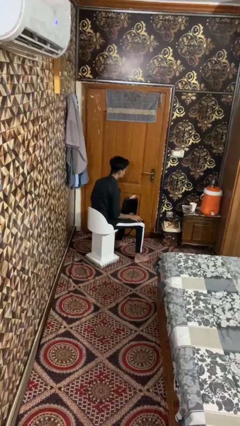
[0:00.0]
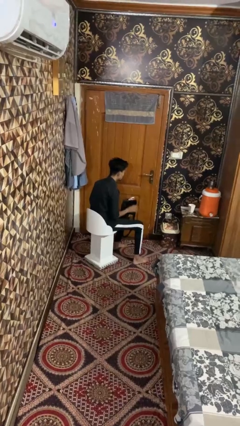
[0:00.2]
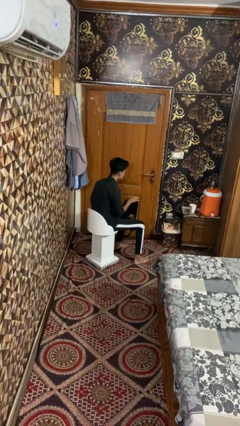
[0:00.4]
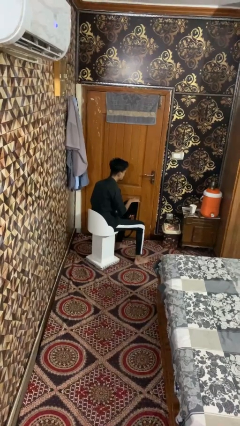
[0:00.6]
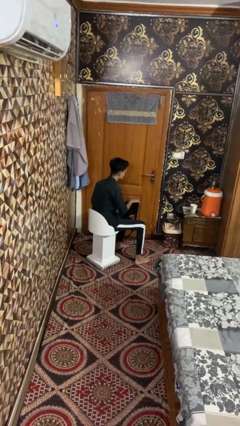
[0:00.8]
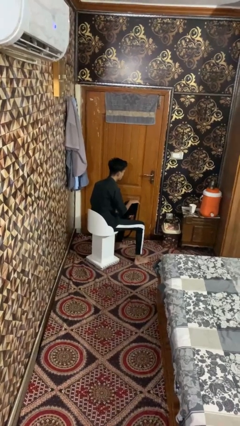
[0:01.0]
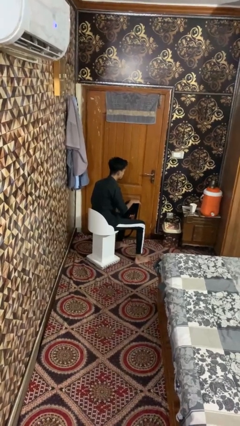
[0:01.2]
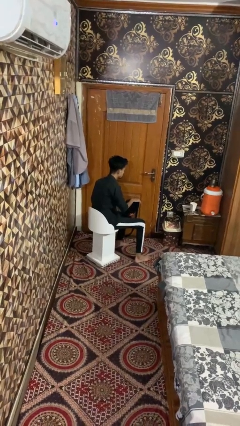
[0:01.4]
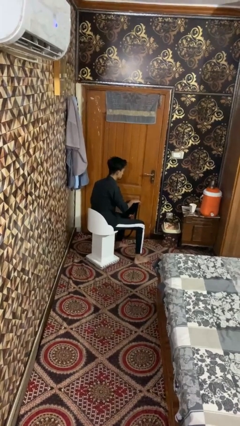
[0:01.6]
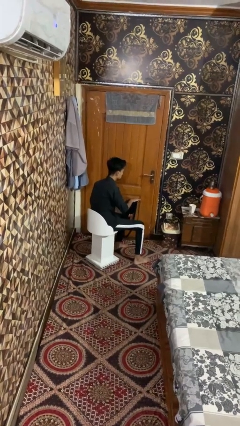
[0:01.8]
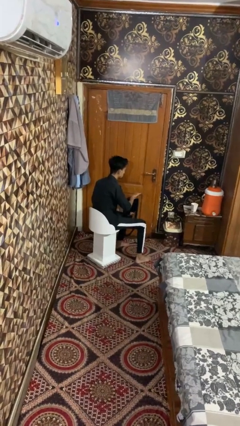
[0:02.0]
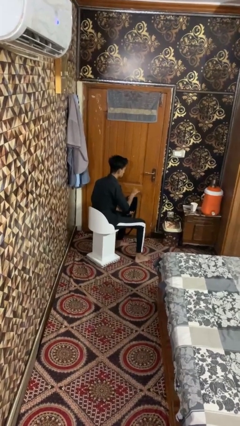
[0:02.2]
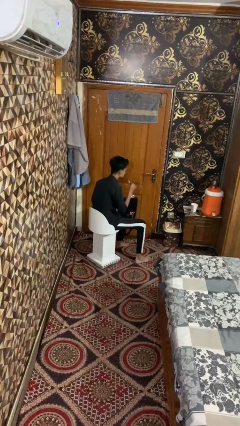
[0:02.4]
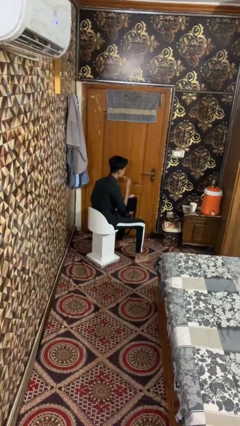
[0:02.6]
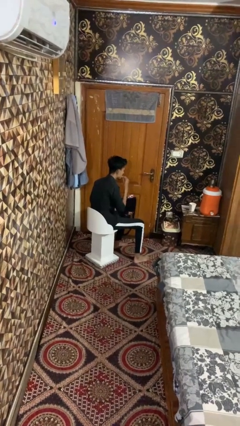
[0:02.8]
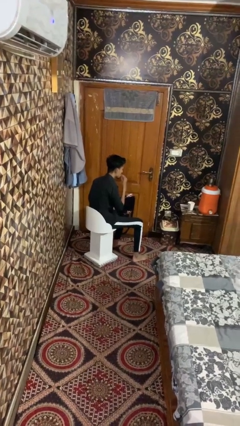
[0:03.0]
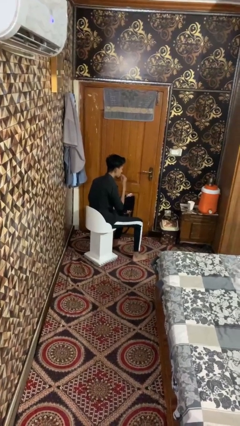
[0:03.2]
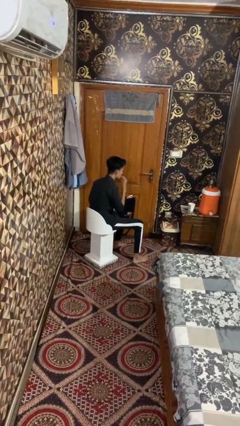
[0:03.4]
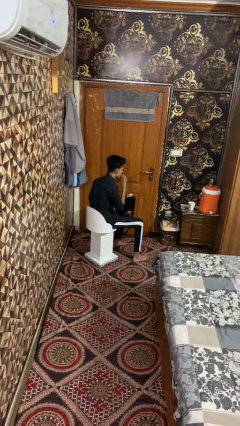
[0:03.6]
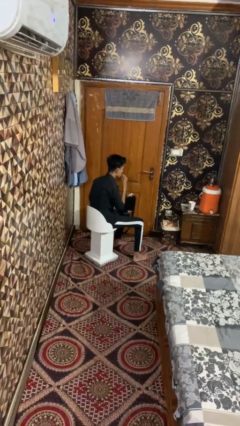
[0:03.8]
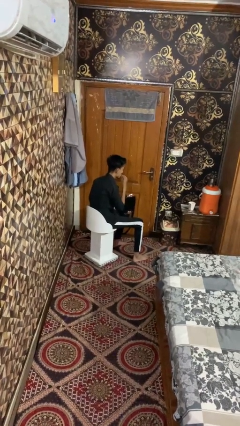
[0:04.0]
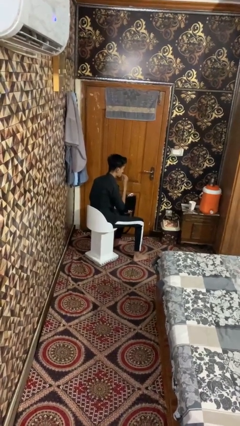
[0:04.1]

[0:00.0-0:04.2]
person eats snack from bag

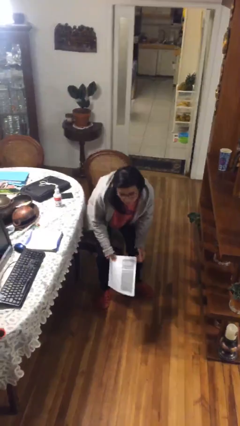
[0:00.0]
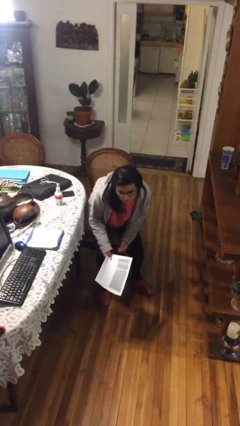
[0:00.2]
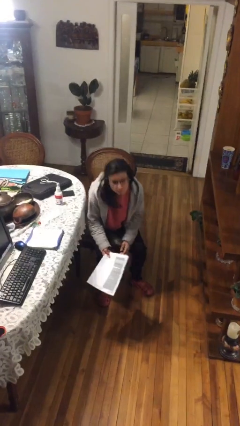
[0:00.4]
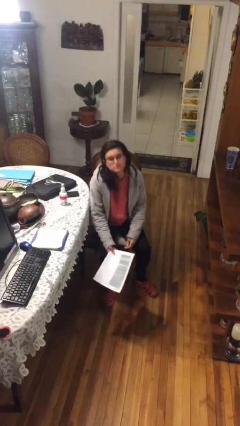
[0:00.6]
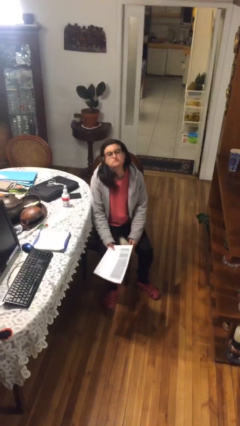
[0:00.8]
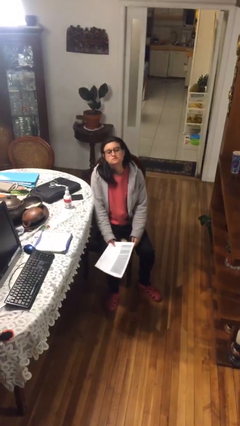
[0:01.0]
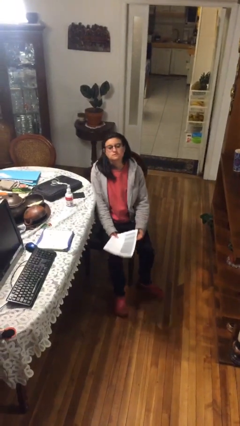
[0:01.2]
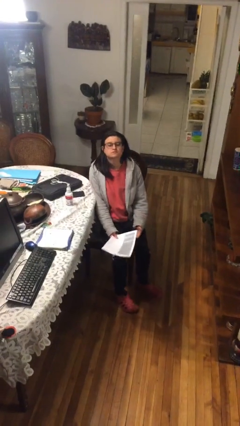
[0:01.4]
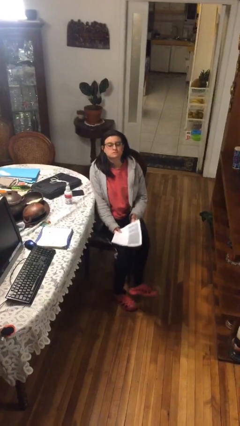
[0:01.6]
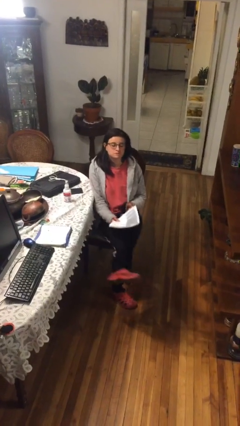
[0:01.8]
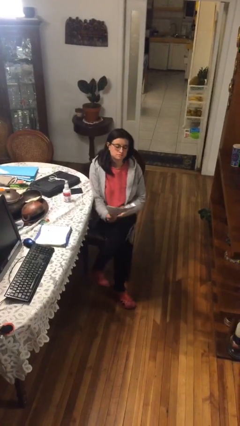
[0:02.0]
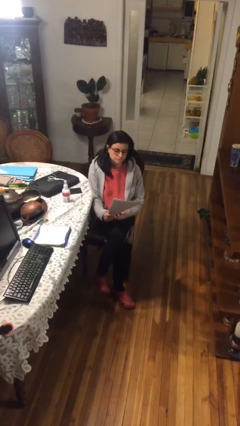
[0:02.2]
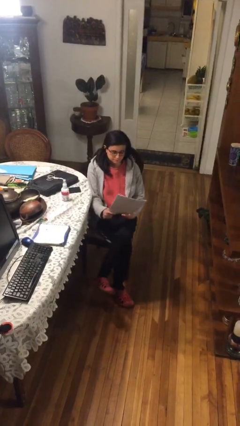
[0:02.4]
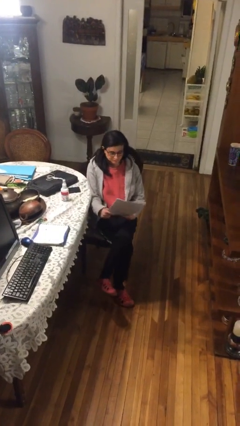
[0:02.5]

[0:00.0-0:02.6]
person sits down

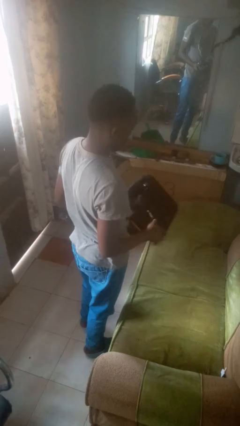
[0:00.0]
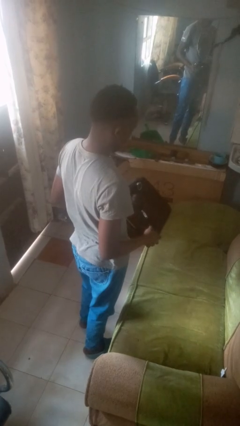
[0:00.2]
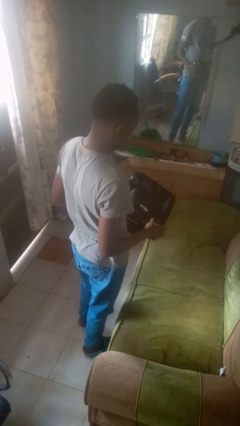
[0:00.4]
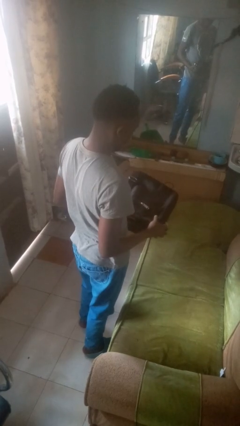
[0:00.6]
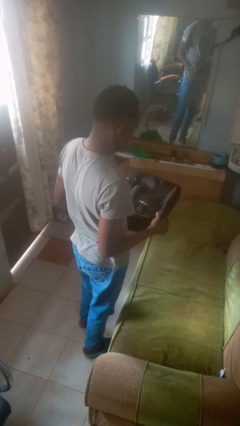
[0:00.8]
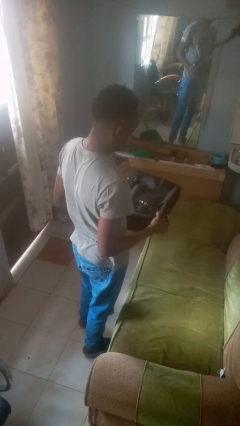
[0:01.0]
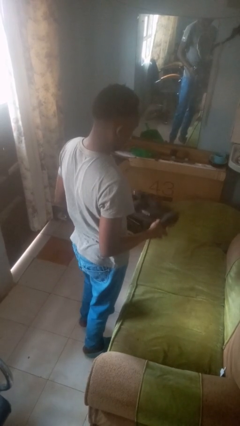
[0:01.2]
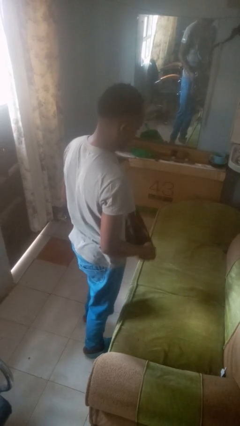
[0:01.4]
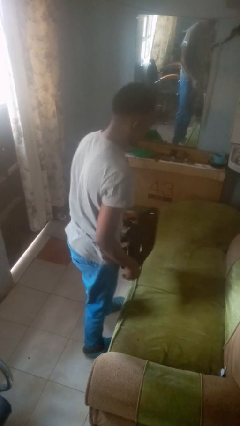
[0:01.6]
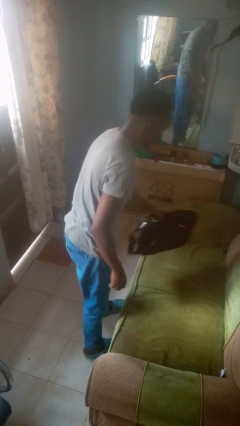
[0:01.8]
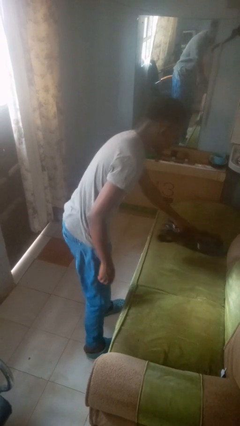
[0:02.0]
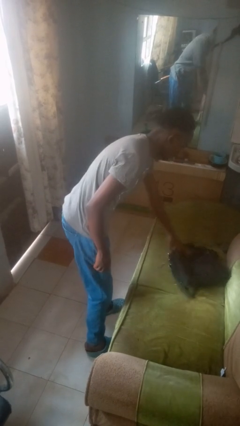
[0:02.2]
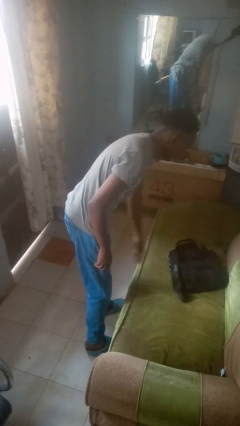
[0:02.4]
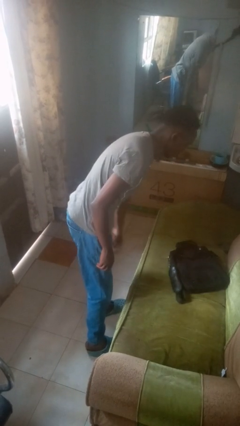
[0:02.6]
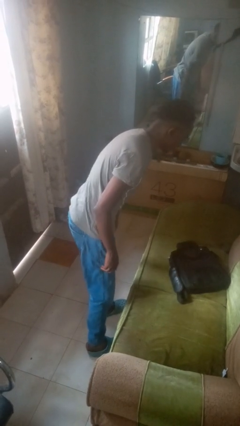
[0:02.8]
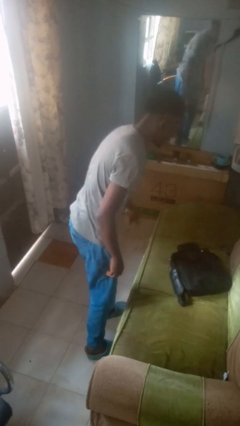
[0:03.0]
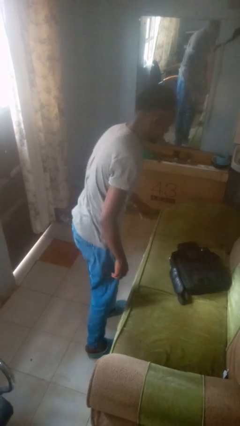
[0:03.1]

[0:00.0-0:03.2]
person puts down object on couch

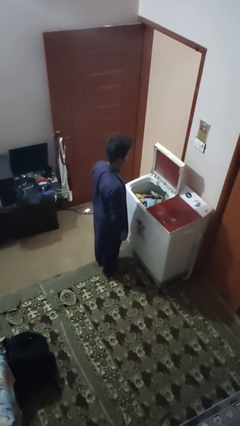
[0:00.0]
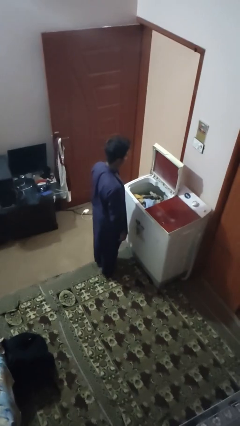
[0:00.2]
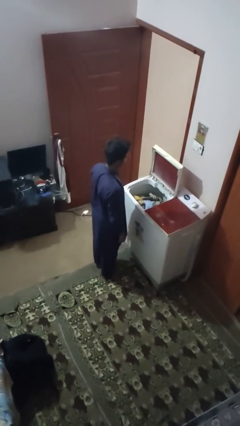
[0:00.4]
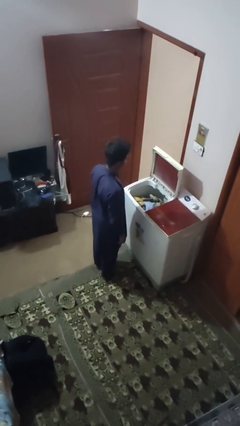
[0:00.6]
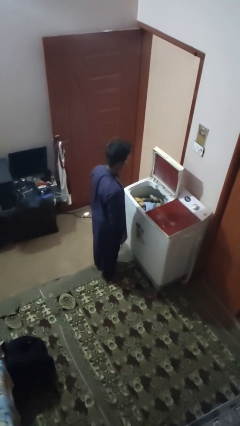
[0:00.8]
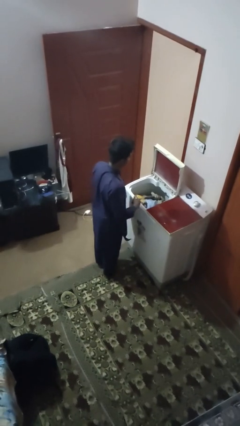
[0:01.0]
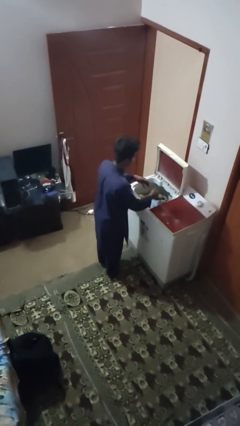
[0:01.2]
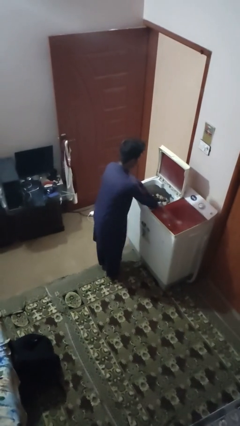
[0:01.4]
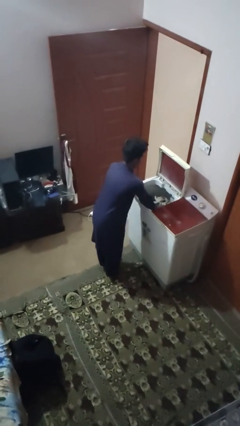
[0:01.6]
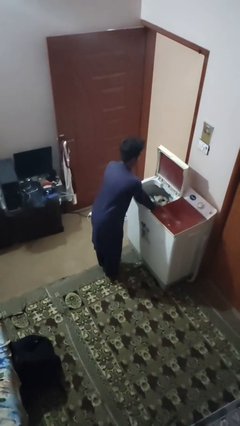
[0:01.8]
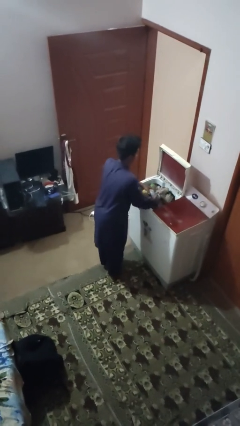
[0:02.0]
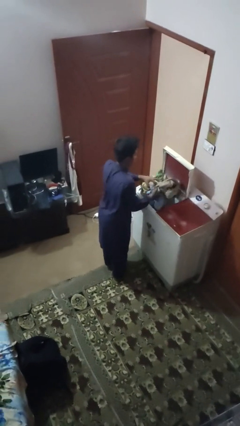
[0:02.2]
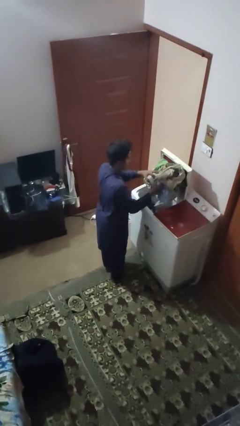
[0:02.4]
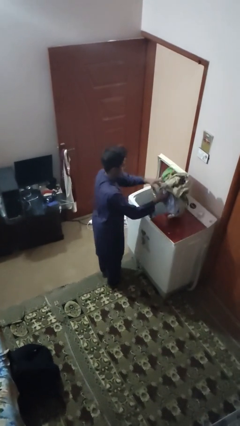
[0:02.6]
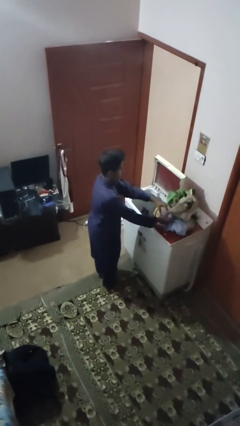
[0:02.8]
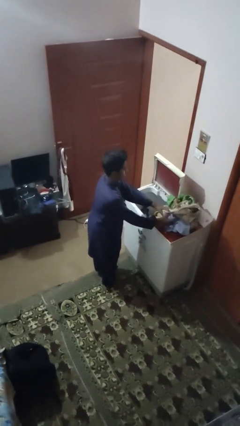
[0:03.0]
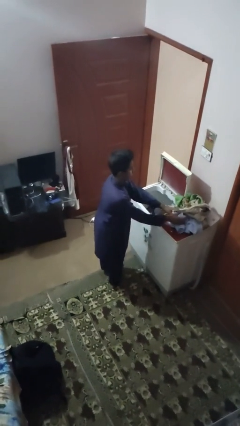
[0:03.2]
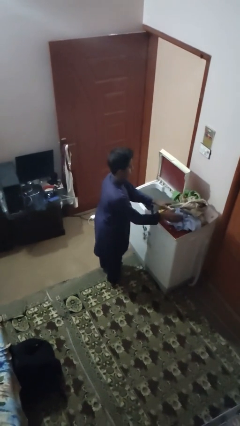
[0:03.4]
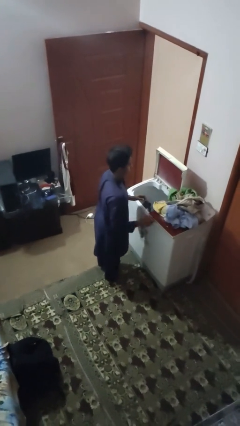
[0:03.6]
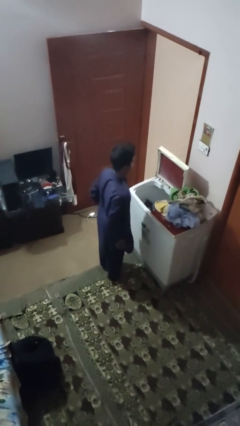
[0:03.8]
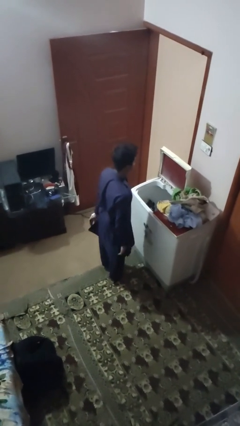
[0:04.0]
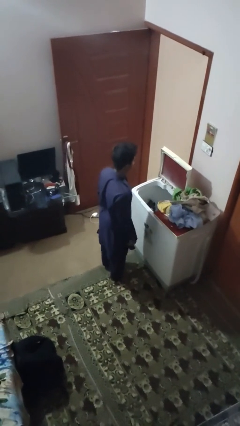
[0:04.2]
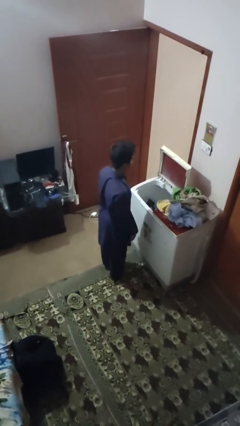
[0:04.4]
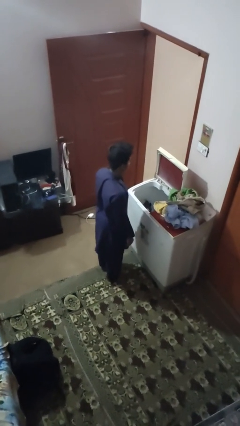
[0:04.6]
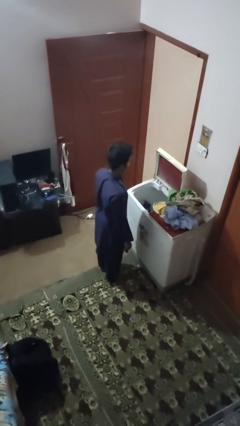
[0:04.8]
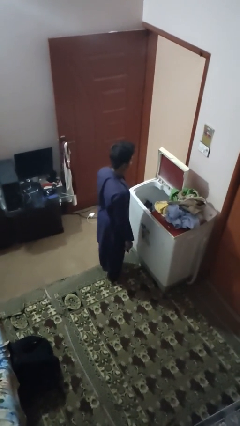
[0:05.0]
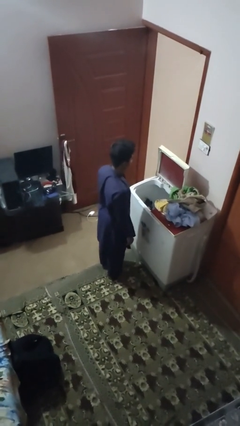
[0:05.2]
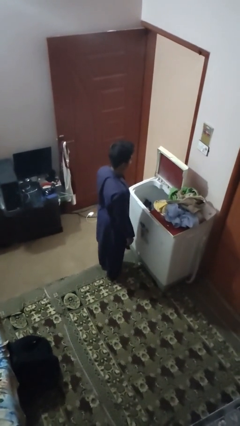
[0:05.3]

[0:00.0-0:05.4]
person unloads clotheswasher

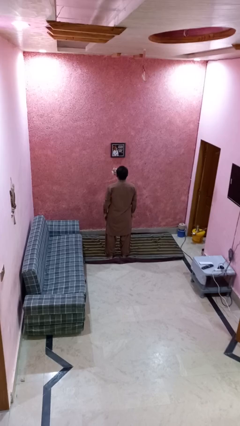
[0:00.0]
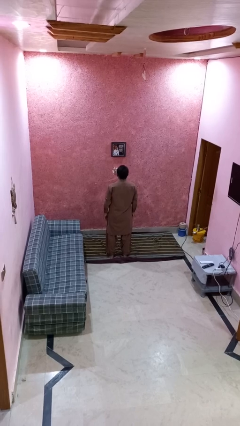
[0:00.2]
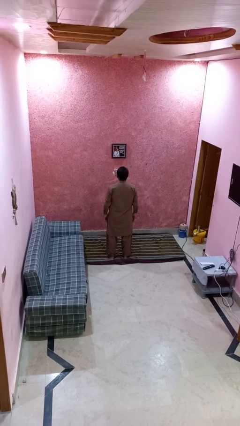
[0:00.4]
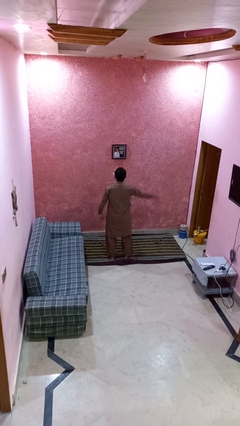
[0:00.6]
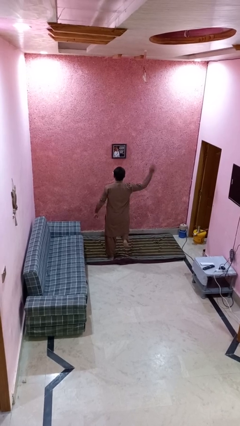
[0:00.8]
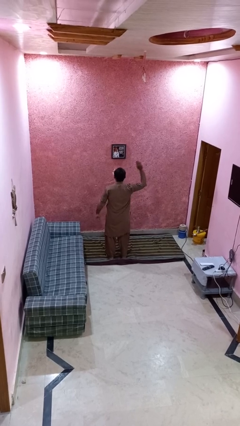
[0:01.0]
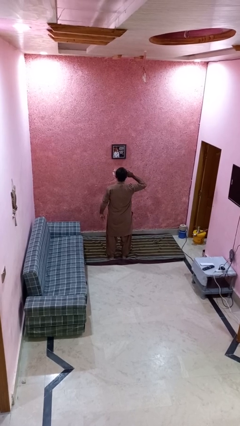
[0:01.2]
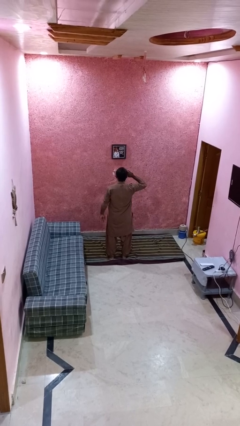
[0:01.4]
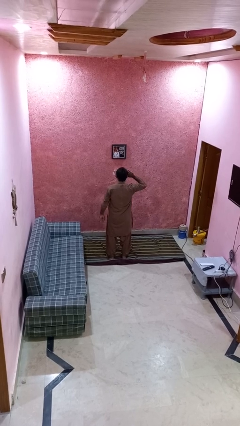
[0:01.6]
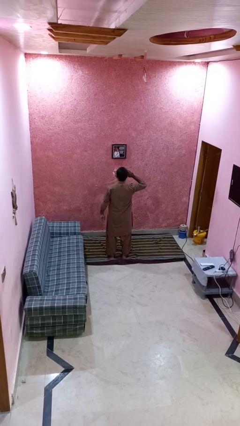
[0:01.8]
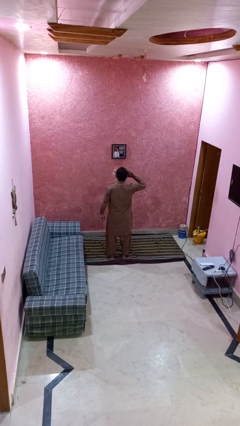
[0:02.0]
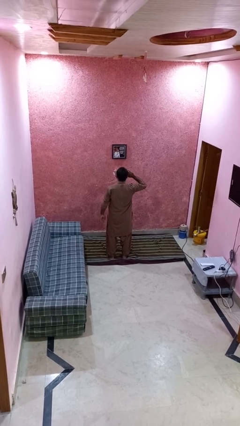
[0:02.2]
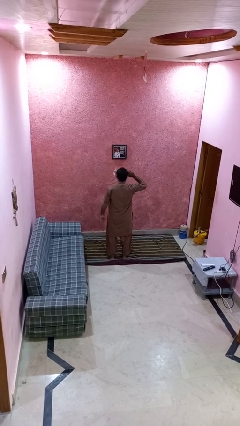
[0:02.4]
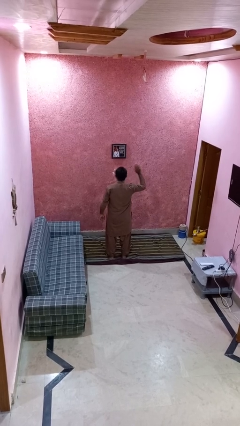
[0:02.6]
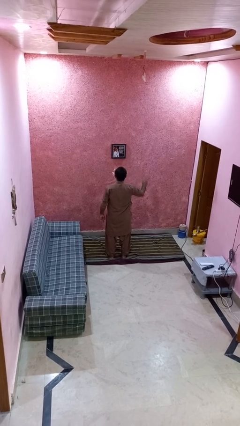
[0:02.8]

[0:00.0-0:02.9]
person salutes
